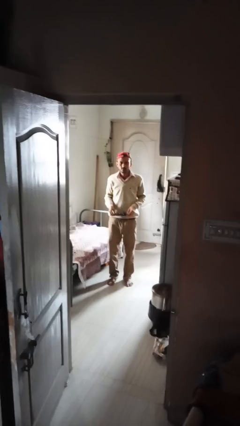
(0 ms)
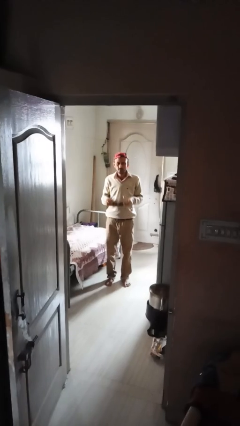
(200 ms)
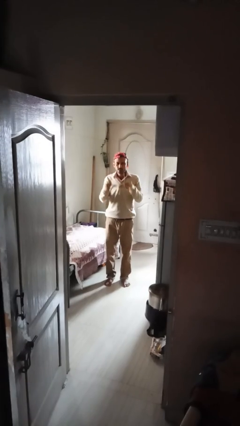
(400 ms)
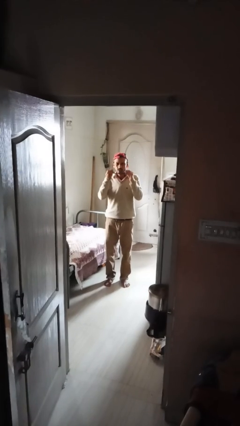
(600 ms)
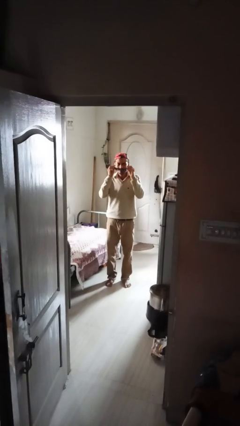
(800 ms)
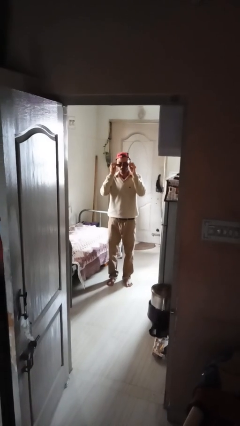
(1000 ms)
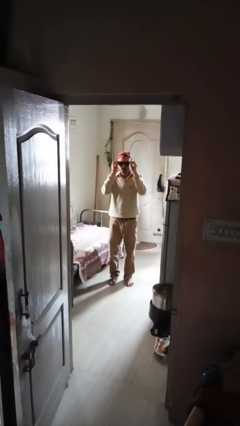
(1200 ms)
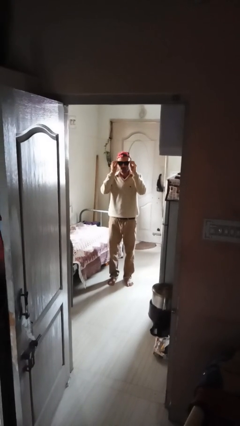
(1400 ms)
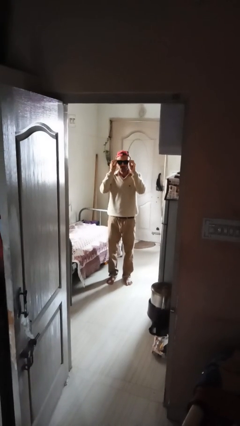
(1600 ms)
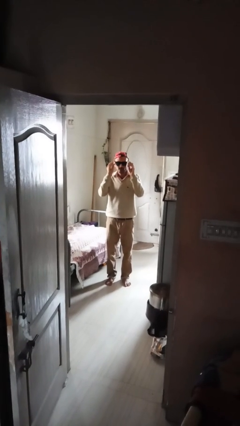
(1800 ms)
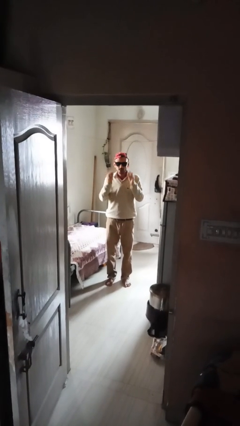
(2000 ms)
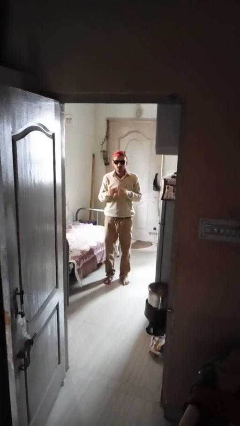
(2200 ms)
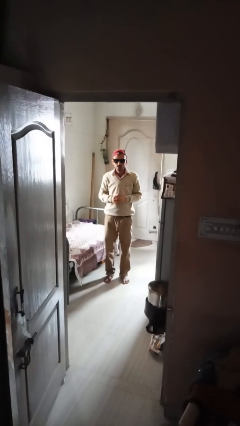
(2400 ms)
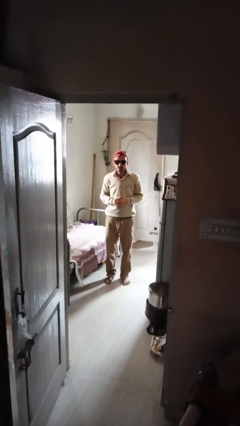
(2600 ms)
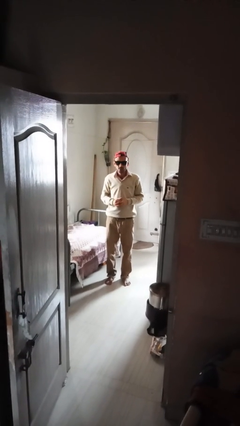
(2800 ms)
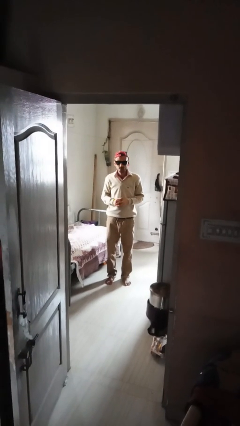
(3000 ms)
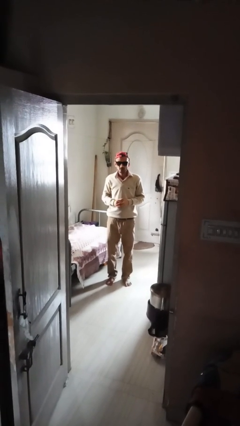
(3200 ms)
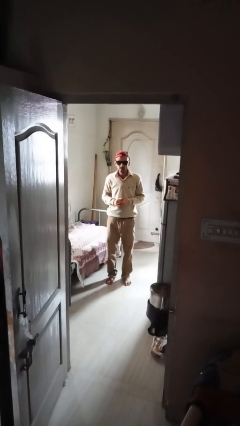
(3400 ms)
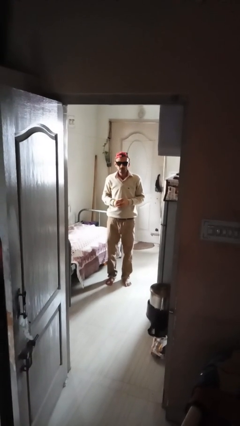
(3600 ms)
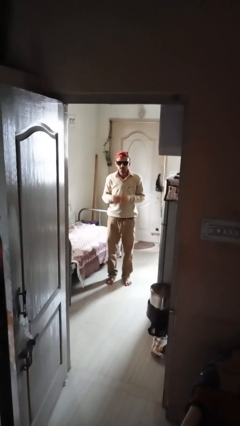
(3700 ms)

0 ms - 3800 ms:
person puts on sunglasses

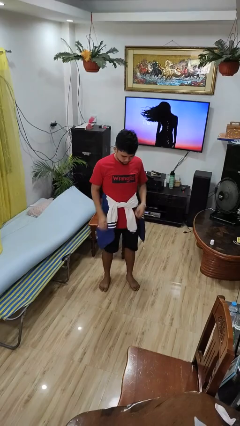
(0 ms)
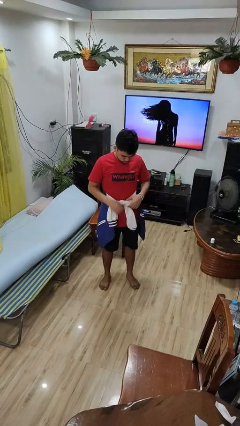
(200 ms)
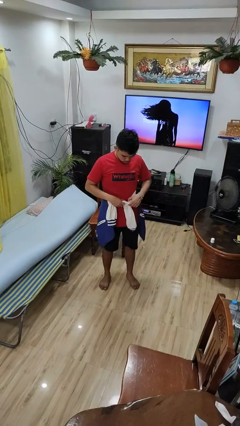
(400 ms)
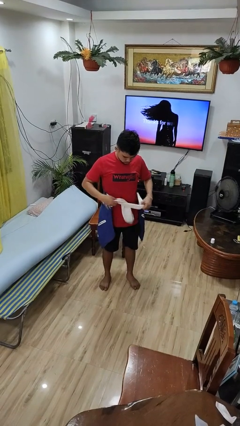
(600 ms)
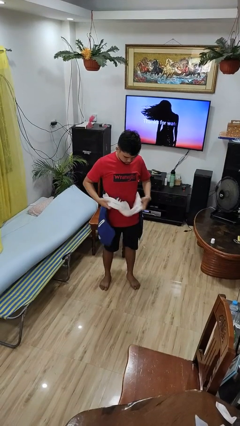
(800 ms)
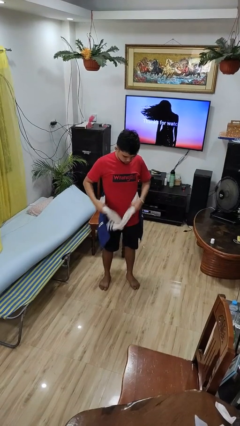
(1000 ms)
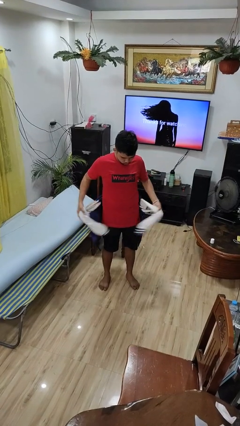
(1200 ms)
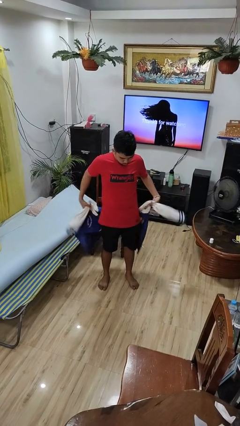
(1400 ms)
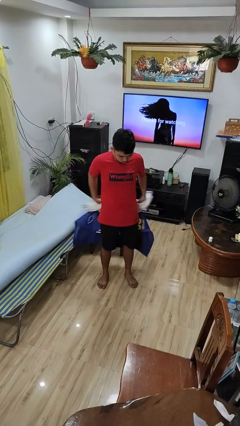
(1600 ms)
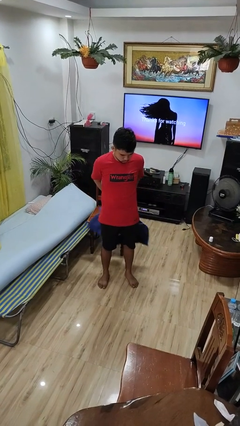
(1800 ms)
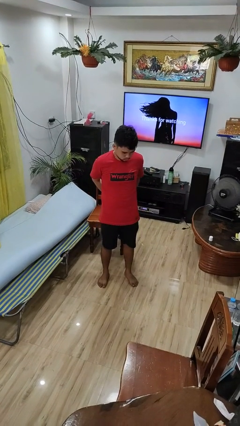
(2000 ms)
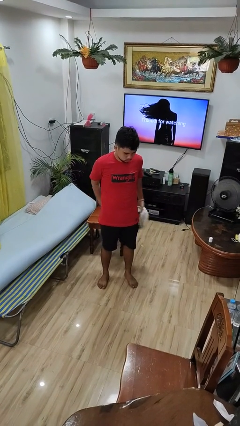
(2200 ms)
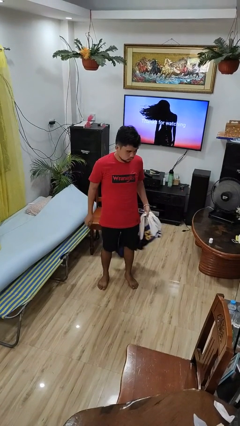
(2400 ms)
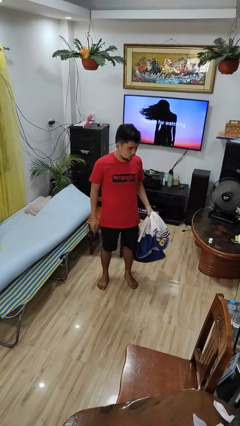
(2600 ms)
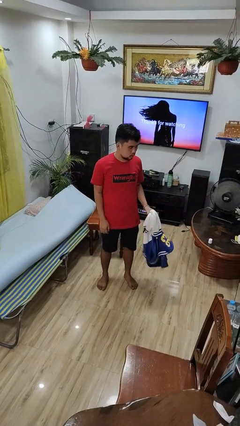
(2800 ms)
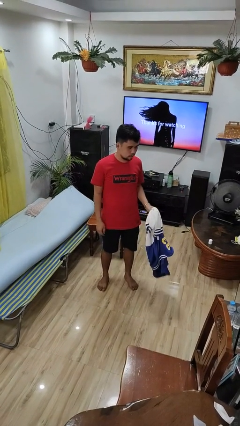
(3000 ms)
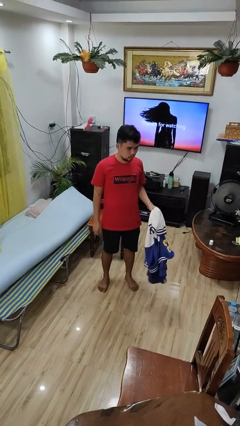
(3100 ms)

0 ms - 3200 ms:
person unties jacket around waist

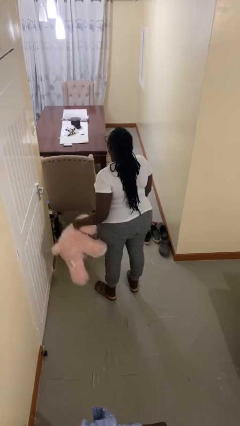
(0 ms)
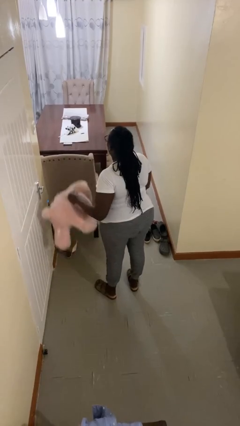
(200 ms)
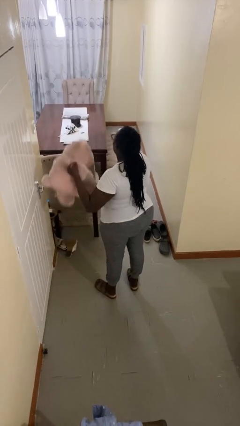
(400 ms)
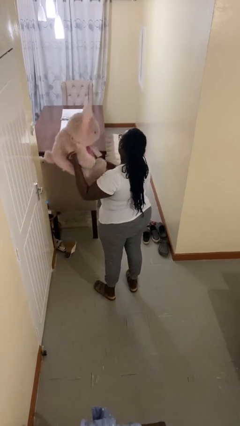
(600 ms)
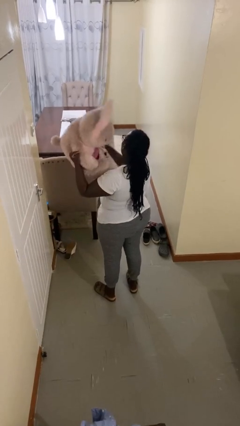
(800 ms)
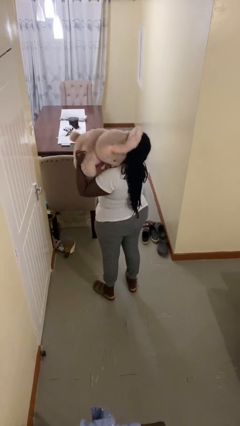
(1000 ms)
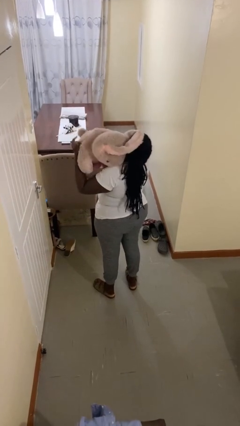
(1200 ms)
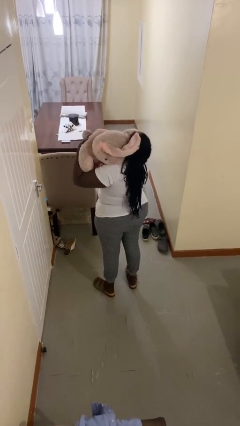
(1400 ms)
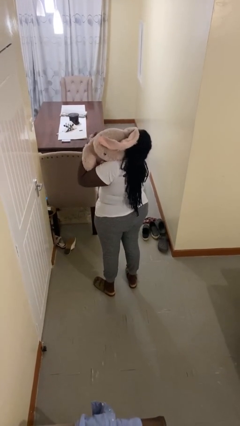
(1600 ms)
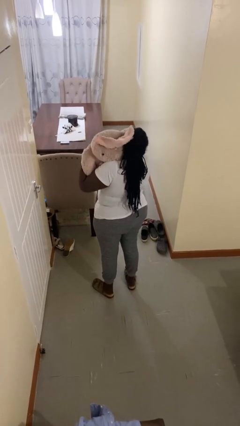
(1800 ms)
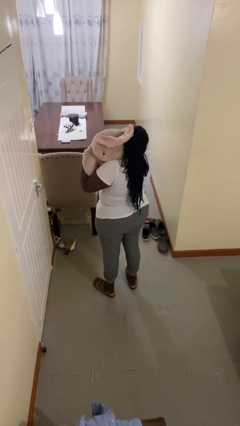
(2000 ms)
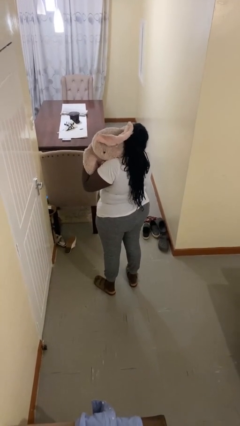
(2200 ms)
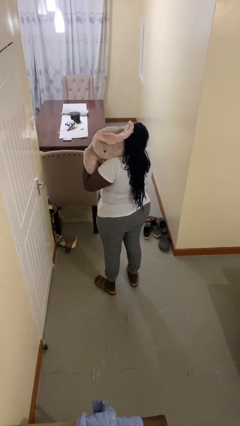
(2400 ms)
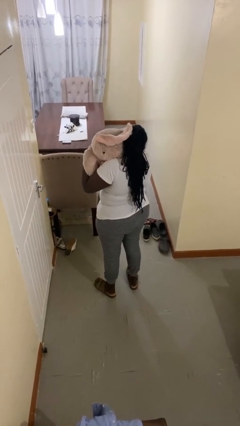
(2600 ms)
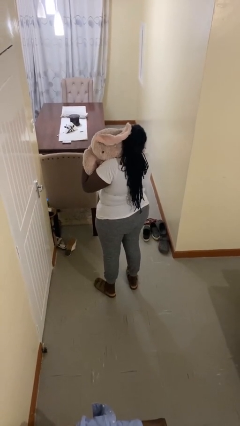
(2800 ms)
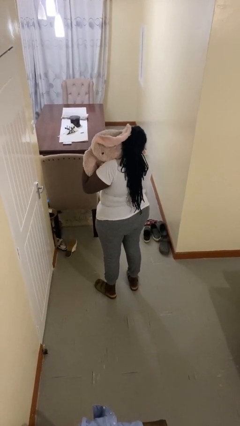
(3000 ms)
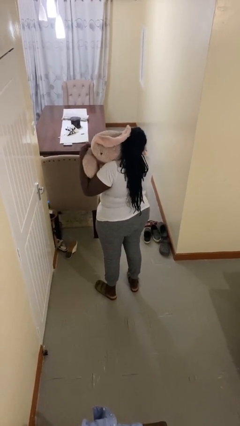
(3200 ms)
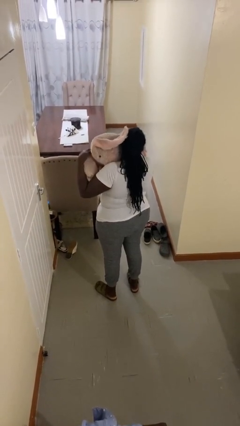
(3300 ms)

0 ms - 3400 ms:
person hugs stuffed animal

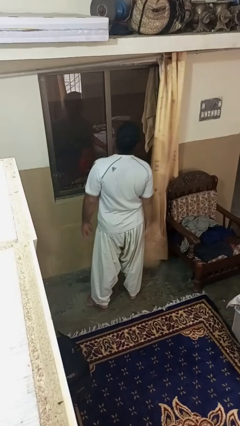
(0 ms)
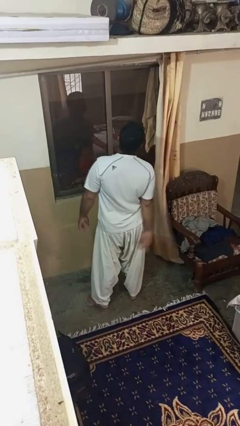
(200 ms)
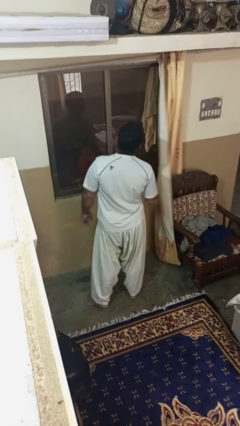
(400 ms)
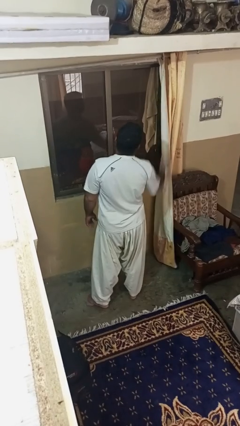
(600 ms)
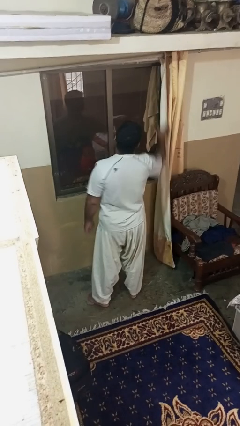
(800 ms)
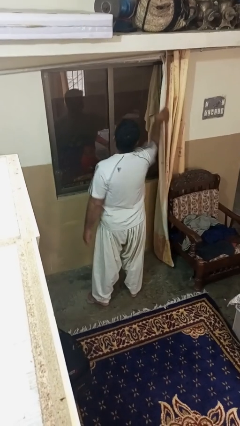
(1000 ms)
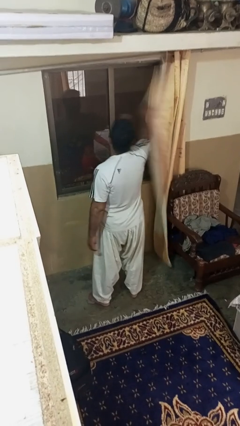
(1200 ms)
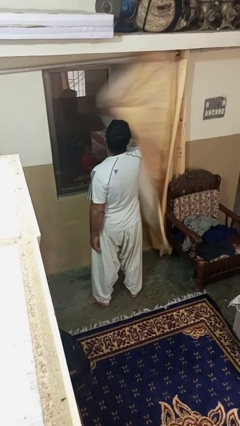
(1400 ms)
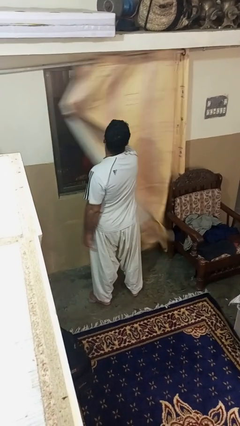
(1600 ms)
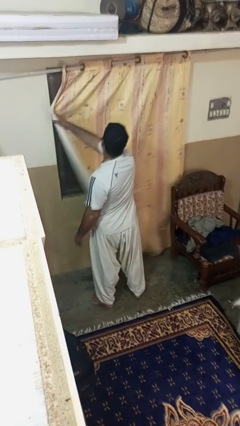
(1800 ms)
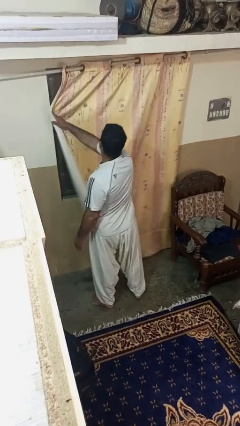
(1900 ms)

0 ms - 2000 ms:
person closes curtains

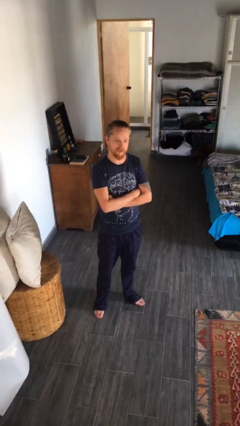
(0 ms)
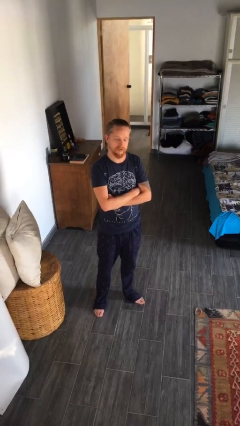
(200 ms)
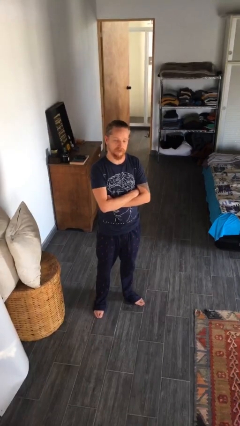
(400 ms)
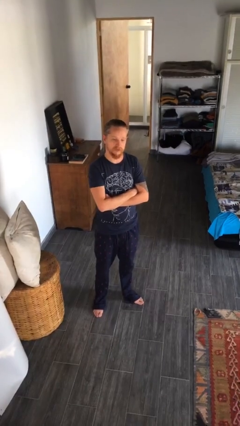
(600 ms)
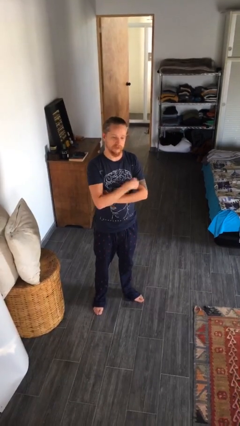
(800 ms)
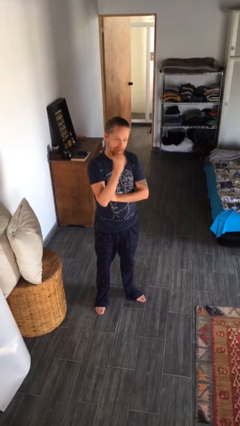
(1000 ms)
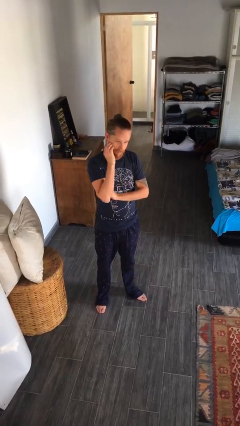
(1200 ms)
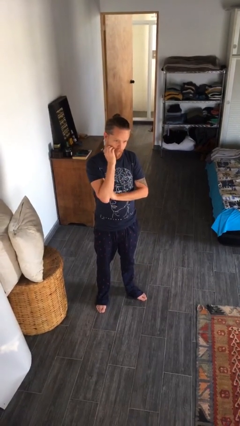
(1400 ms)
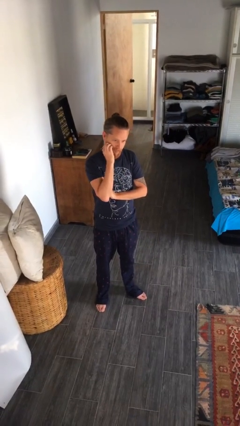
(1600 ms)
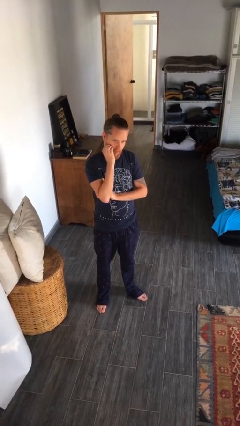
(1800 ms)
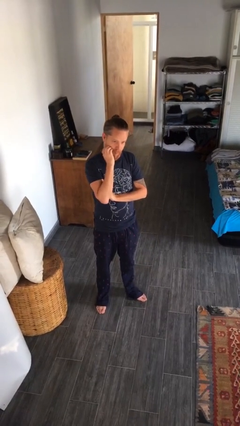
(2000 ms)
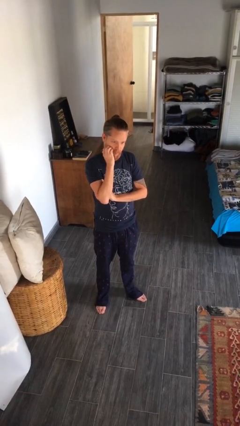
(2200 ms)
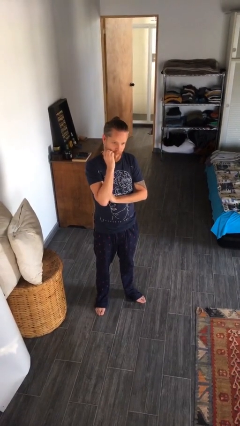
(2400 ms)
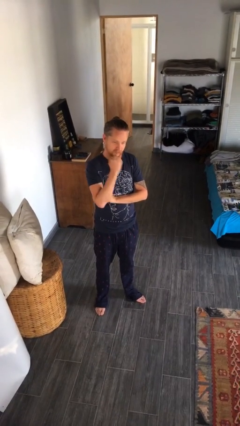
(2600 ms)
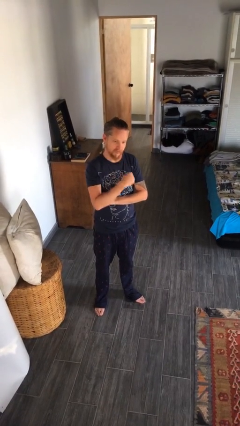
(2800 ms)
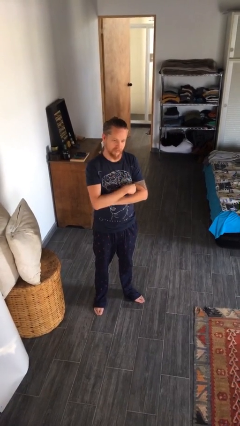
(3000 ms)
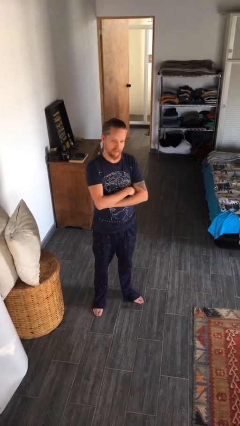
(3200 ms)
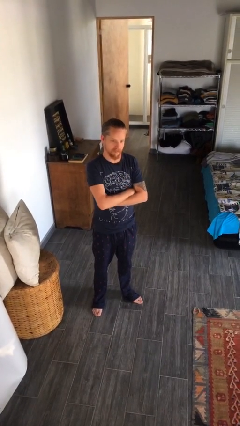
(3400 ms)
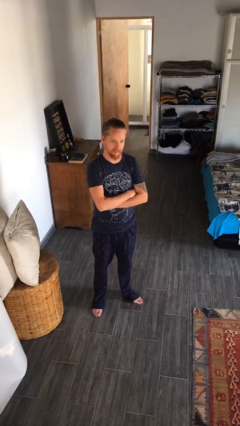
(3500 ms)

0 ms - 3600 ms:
person scratches face

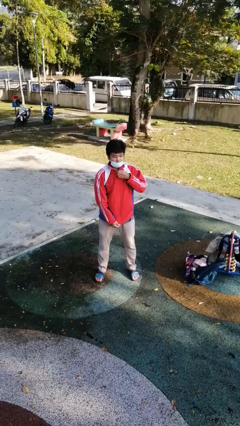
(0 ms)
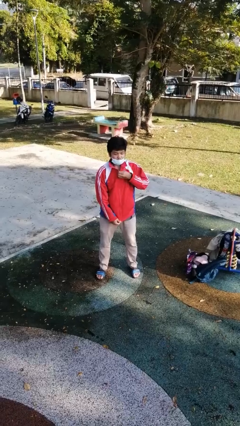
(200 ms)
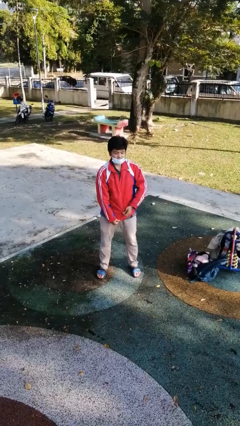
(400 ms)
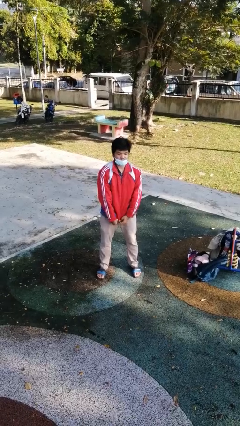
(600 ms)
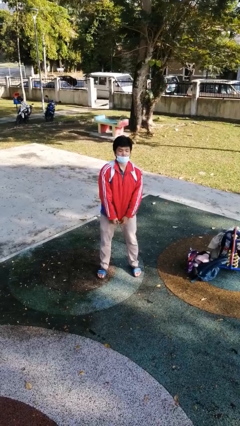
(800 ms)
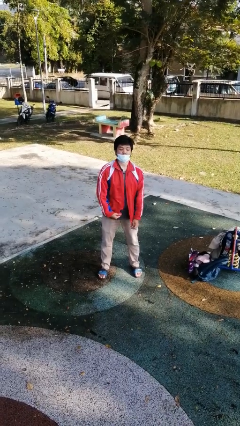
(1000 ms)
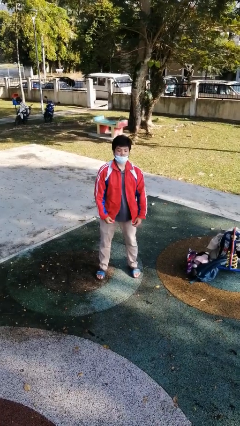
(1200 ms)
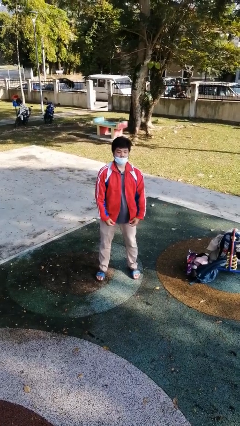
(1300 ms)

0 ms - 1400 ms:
person unzips jacket
